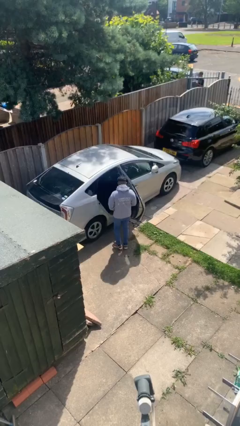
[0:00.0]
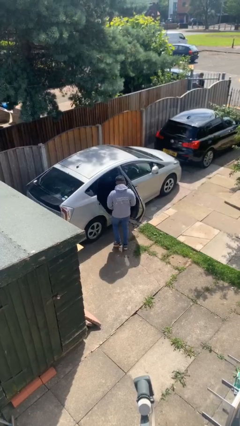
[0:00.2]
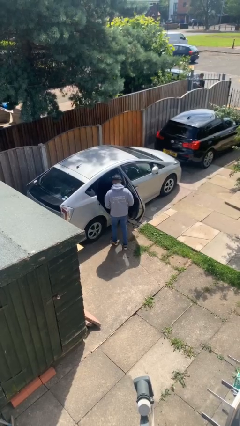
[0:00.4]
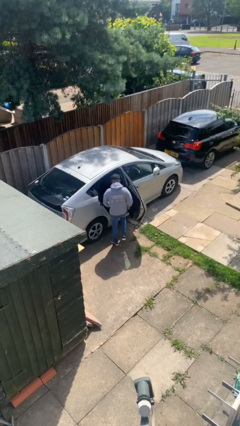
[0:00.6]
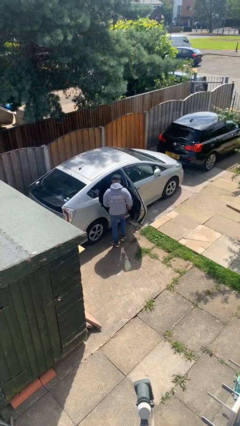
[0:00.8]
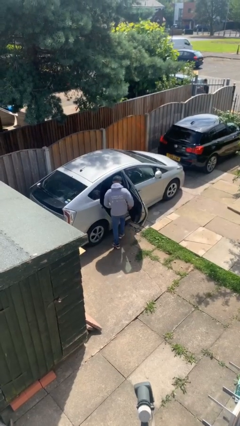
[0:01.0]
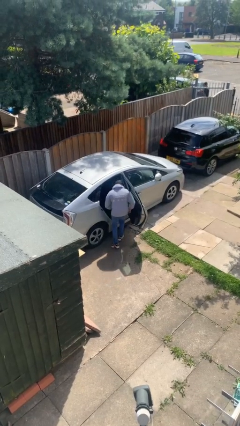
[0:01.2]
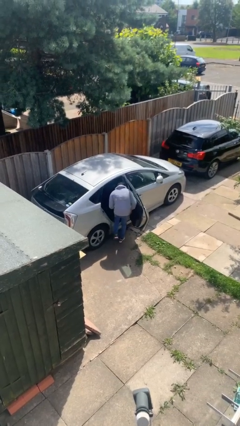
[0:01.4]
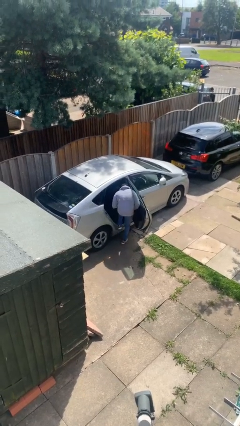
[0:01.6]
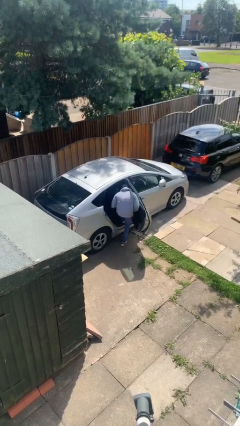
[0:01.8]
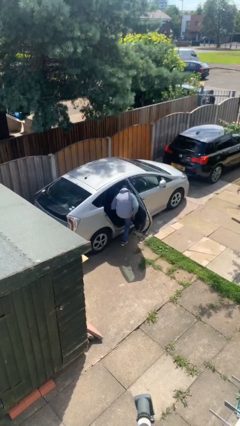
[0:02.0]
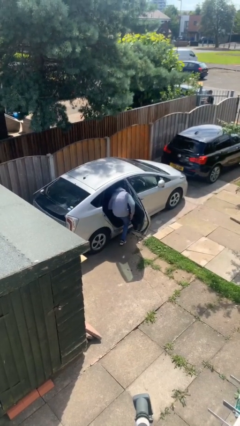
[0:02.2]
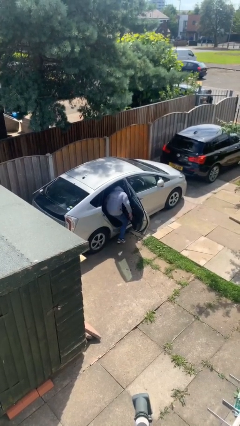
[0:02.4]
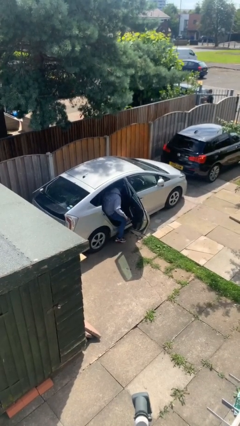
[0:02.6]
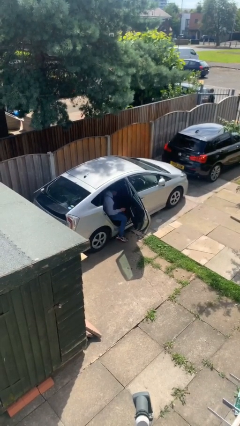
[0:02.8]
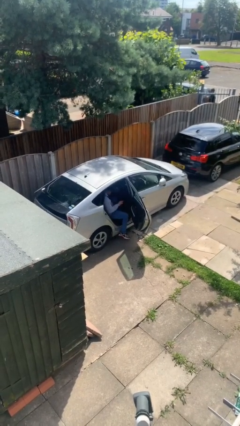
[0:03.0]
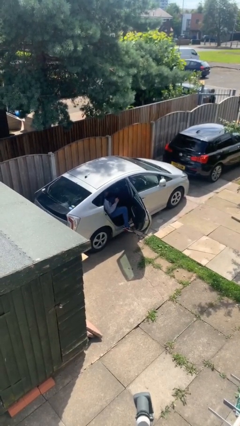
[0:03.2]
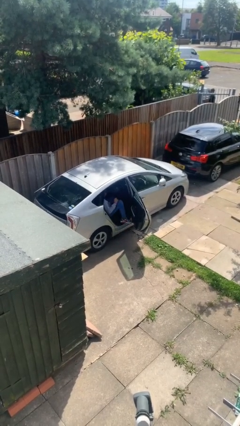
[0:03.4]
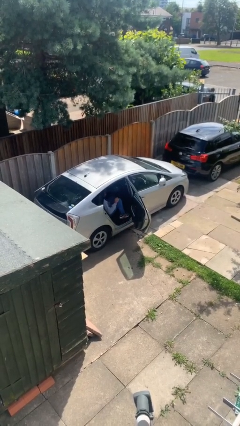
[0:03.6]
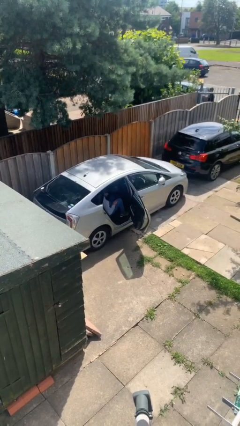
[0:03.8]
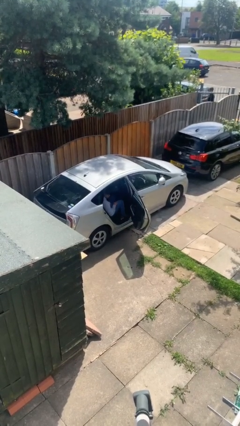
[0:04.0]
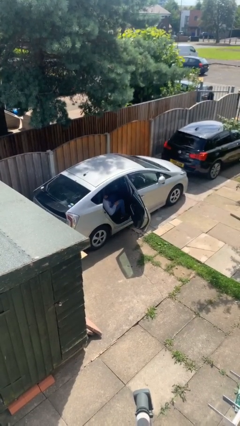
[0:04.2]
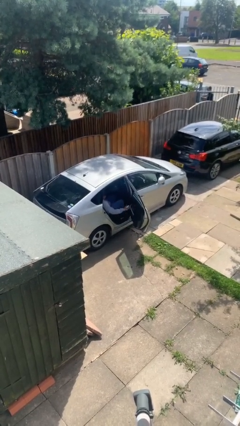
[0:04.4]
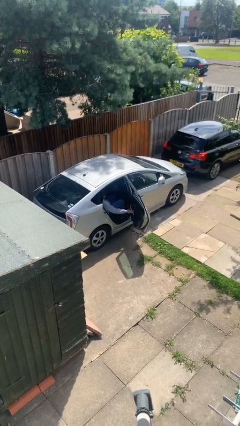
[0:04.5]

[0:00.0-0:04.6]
person enters car

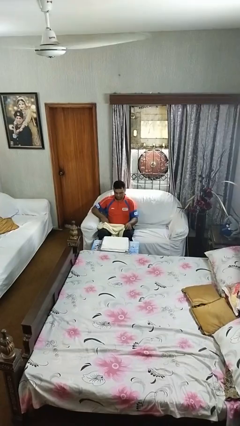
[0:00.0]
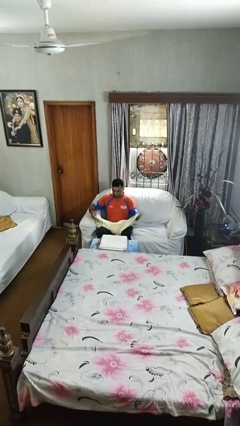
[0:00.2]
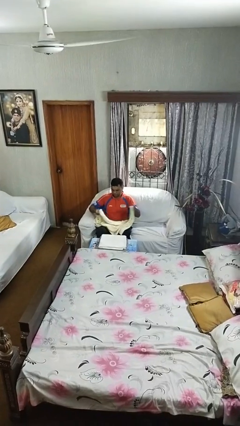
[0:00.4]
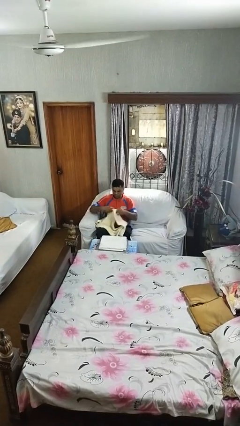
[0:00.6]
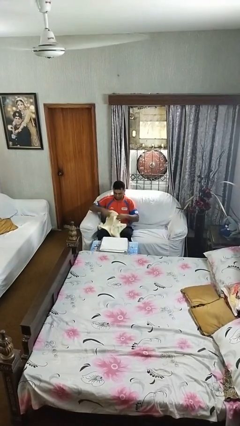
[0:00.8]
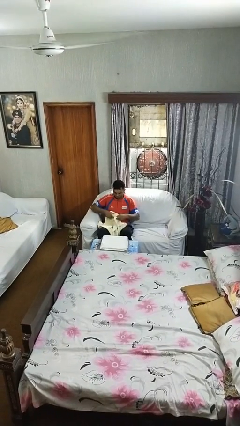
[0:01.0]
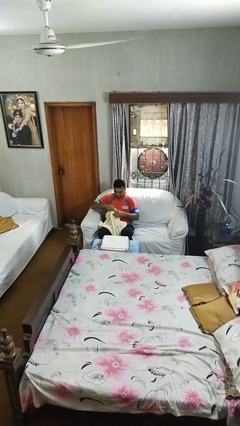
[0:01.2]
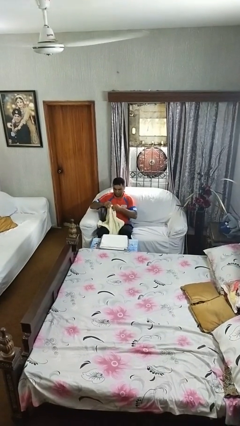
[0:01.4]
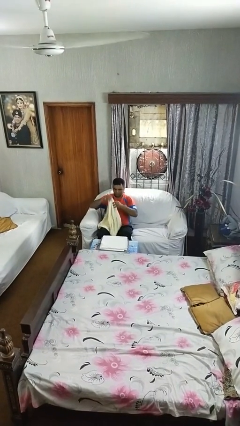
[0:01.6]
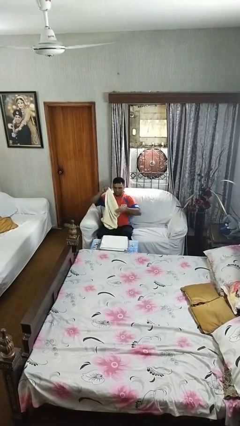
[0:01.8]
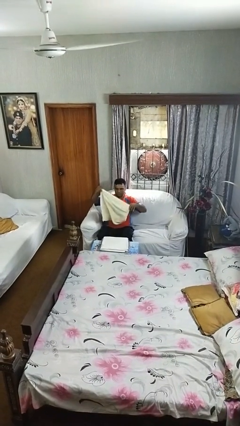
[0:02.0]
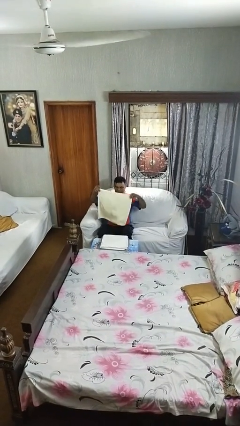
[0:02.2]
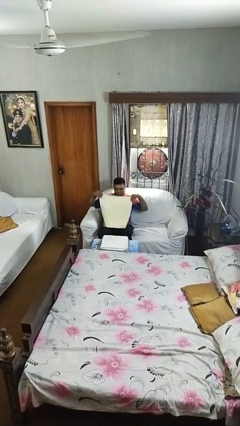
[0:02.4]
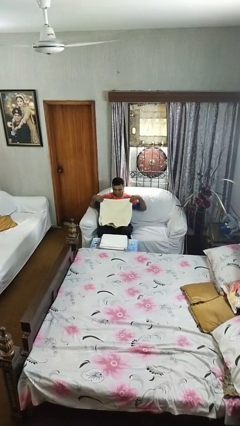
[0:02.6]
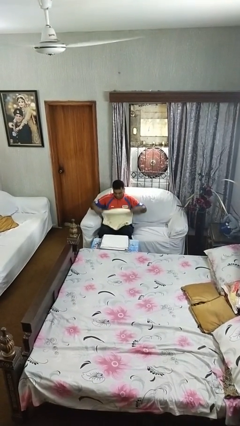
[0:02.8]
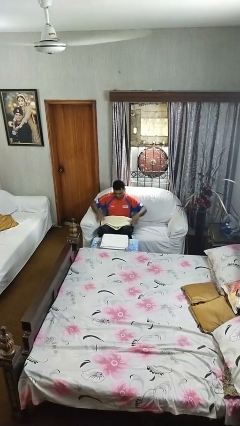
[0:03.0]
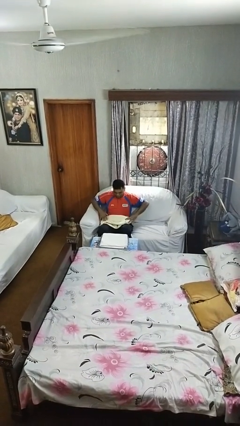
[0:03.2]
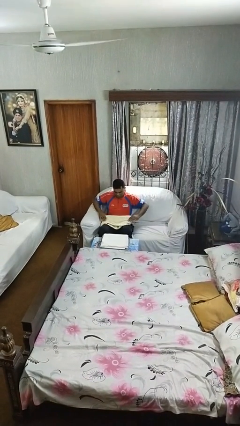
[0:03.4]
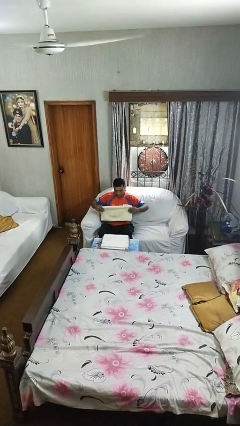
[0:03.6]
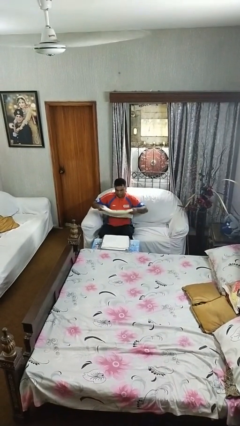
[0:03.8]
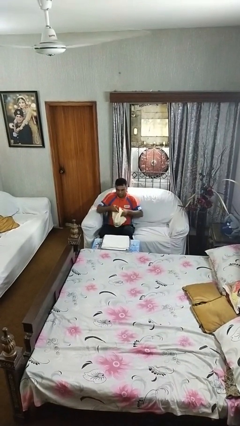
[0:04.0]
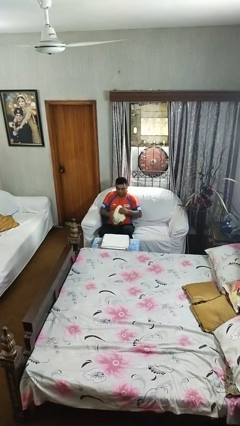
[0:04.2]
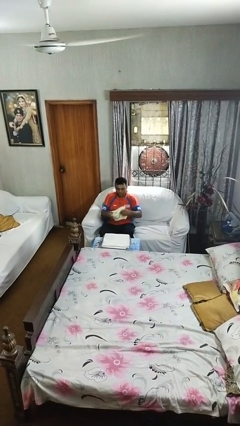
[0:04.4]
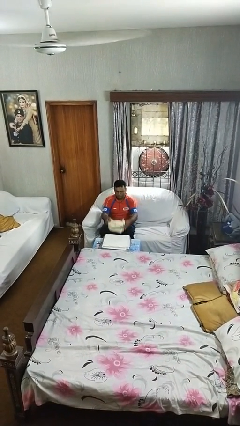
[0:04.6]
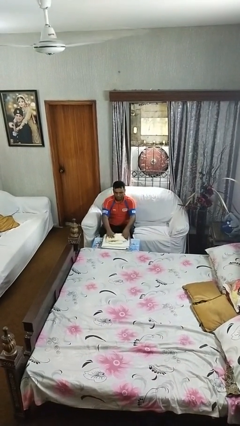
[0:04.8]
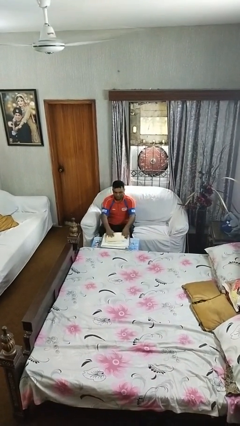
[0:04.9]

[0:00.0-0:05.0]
person folds towel

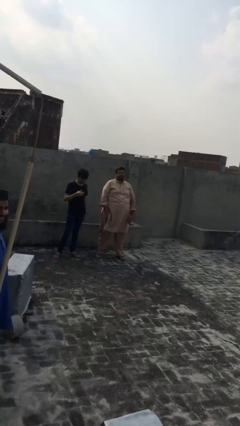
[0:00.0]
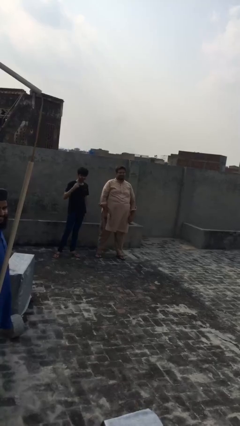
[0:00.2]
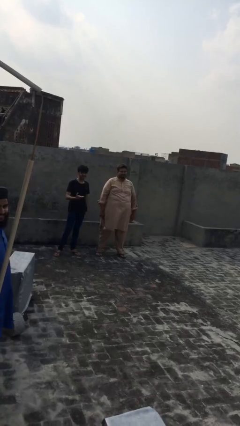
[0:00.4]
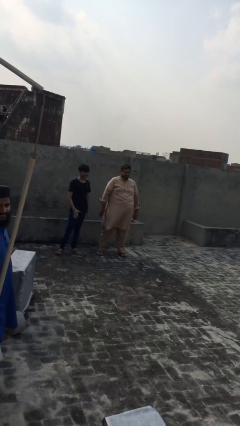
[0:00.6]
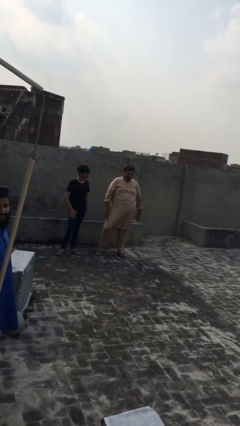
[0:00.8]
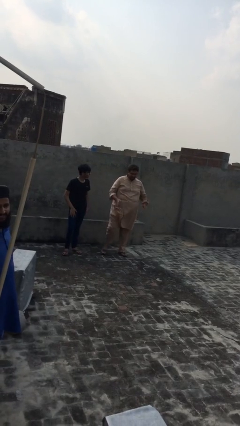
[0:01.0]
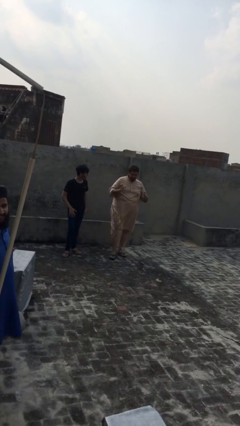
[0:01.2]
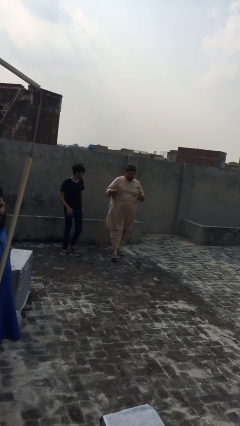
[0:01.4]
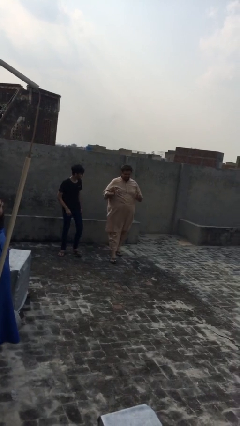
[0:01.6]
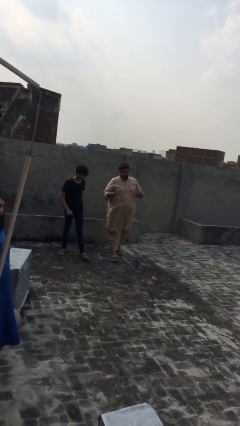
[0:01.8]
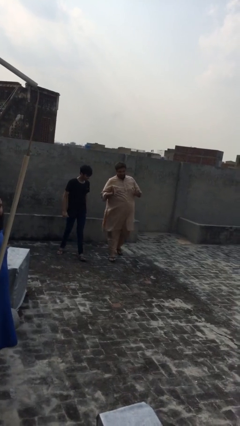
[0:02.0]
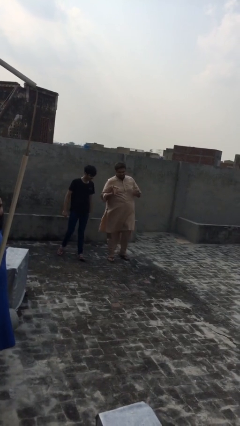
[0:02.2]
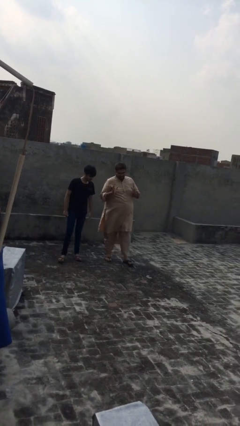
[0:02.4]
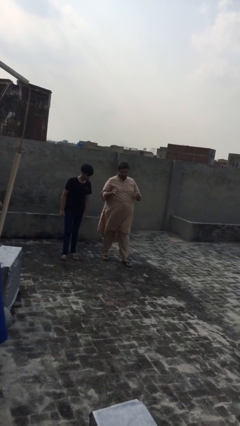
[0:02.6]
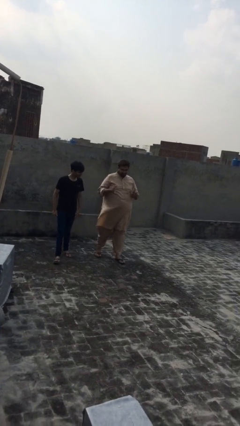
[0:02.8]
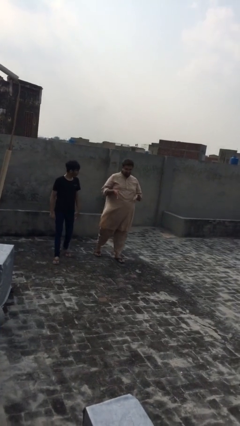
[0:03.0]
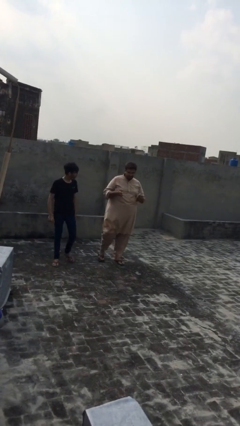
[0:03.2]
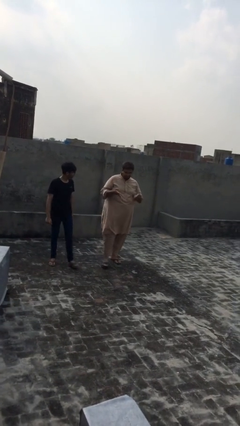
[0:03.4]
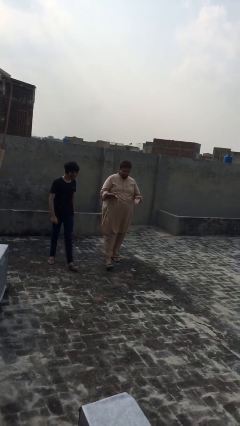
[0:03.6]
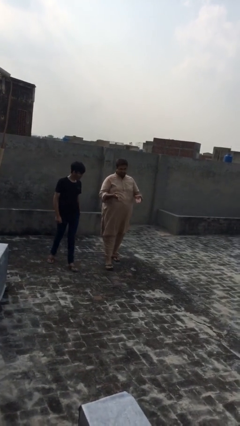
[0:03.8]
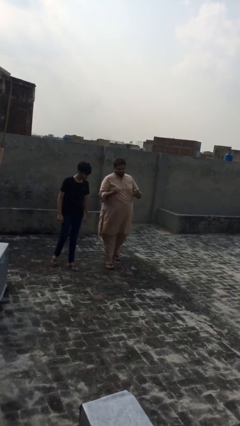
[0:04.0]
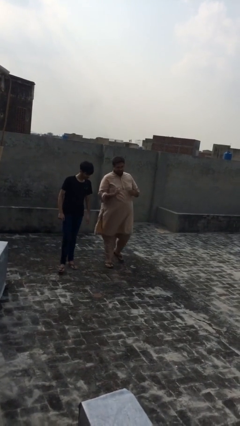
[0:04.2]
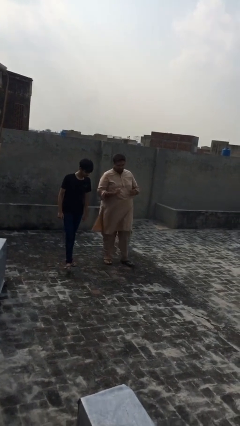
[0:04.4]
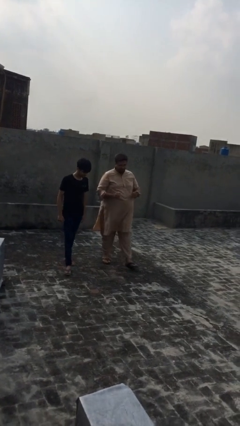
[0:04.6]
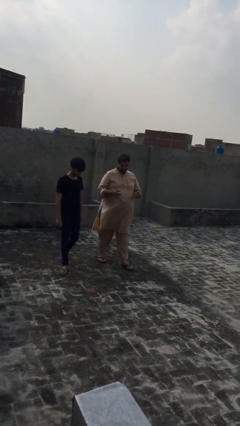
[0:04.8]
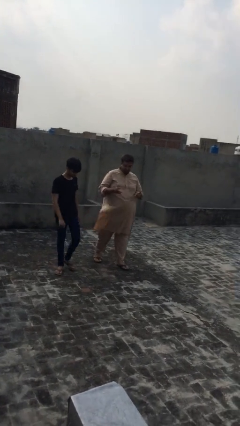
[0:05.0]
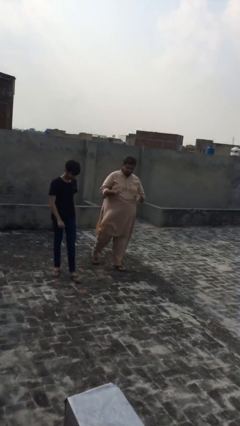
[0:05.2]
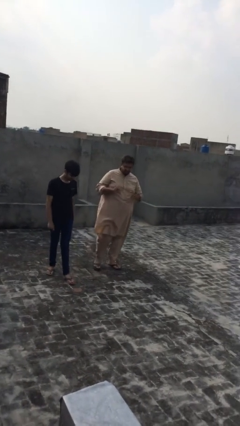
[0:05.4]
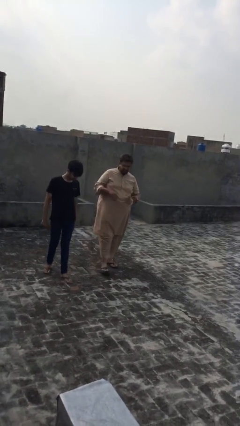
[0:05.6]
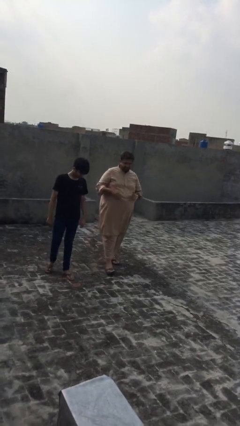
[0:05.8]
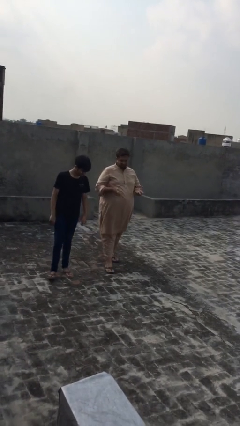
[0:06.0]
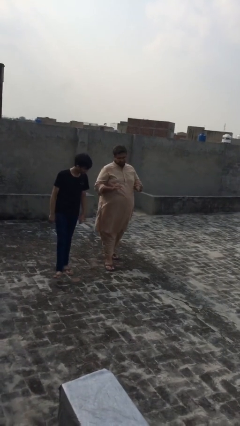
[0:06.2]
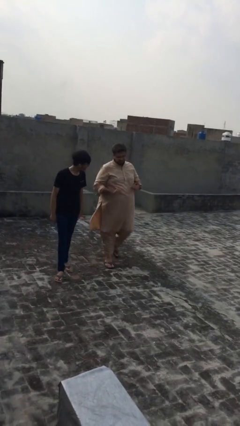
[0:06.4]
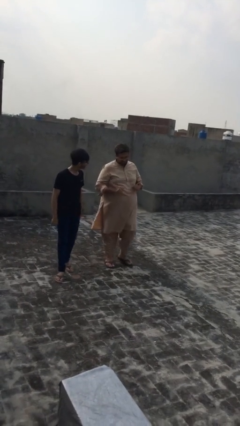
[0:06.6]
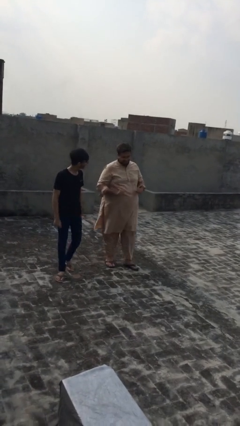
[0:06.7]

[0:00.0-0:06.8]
person talks to person

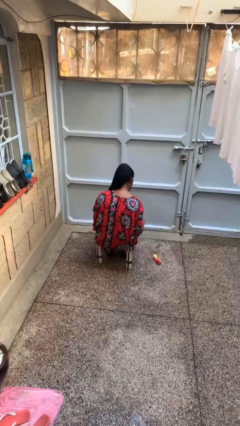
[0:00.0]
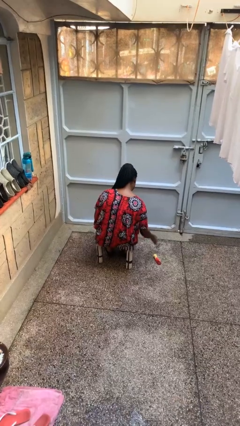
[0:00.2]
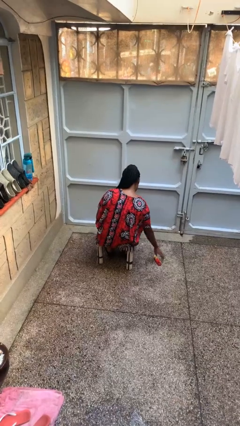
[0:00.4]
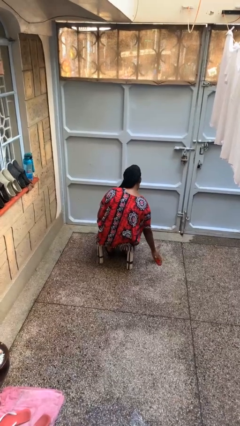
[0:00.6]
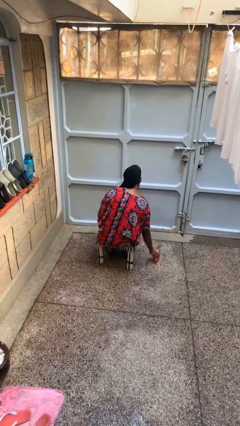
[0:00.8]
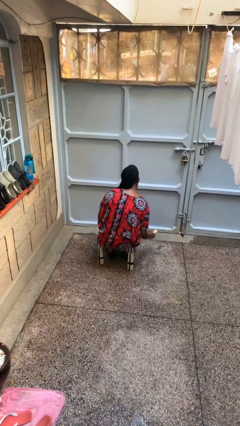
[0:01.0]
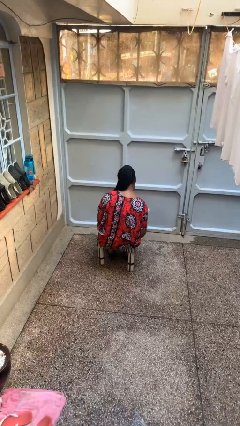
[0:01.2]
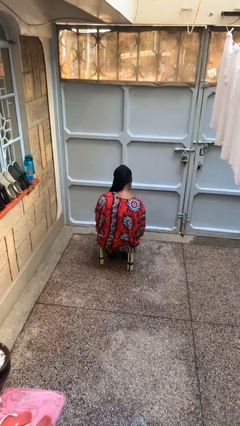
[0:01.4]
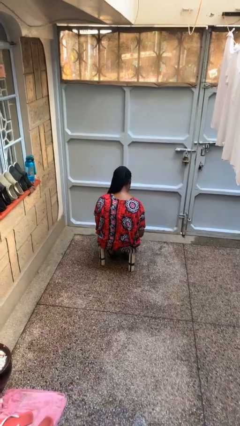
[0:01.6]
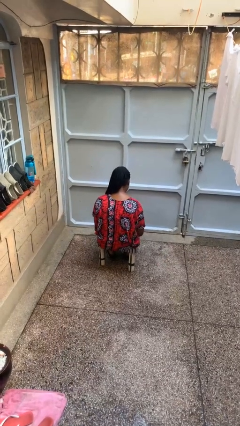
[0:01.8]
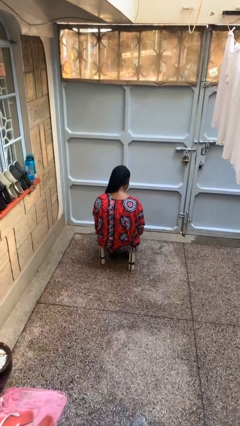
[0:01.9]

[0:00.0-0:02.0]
person picks up object from floor
